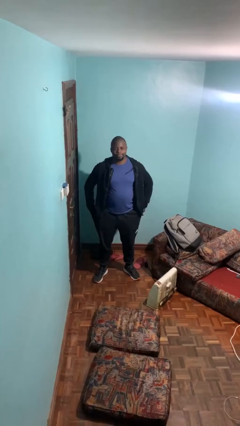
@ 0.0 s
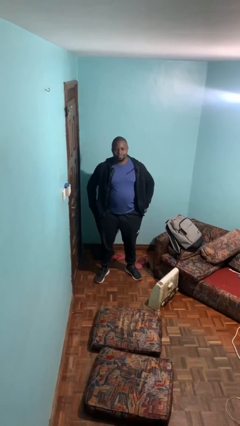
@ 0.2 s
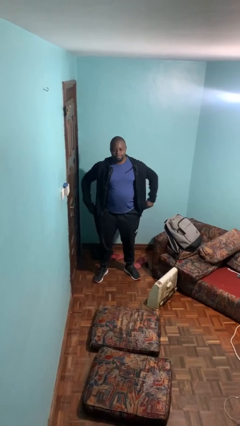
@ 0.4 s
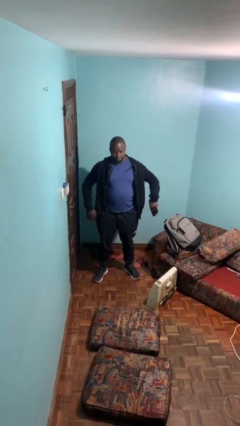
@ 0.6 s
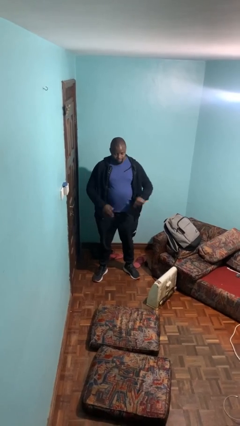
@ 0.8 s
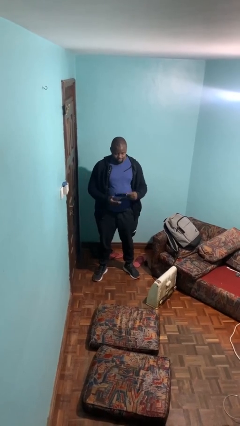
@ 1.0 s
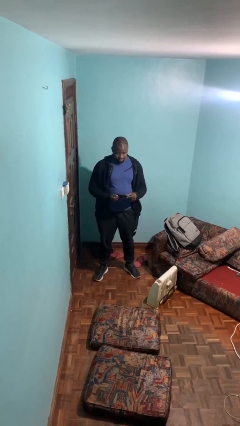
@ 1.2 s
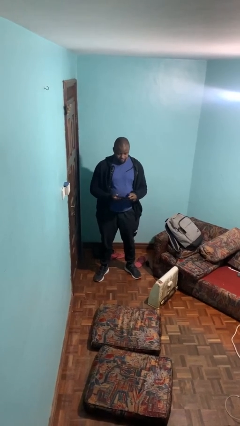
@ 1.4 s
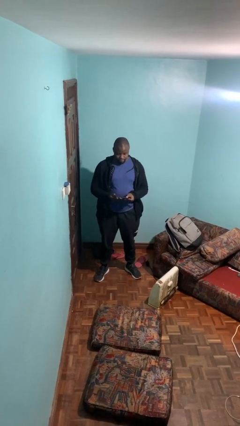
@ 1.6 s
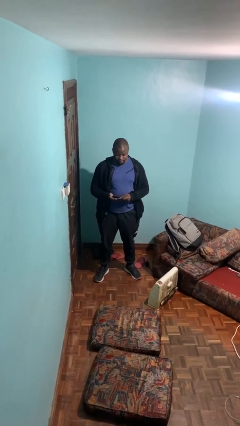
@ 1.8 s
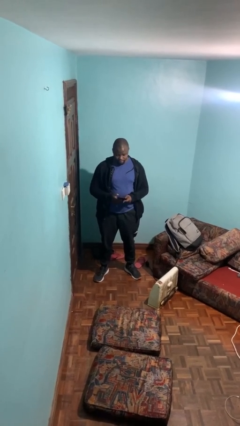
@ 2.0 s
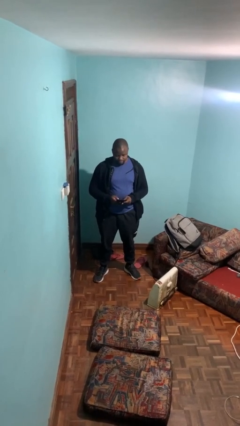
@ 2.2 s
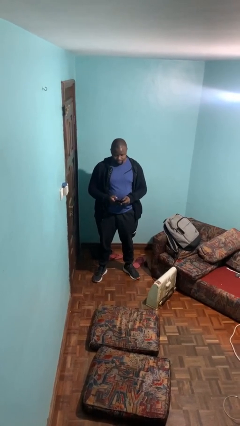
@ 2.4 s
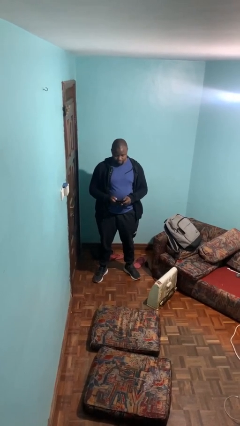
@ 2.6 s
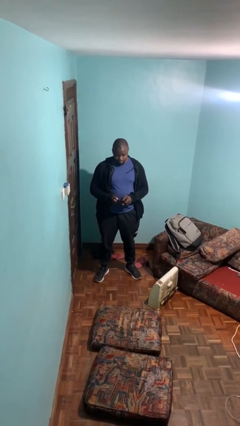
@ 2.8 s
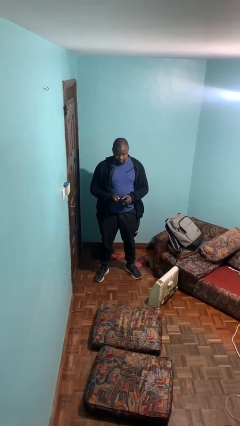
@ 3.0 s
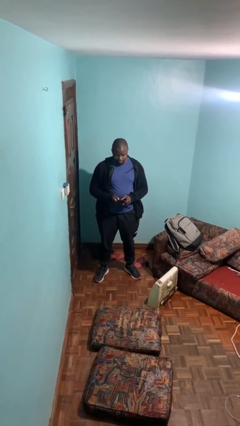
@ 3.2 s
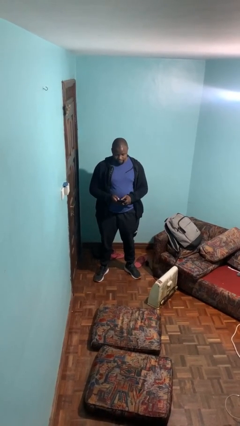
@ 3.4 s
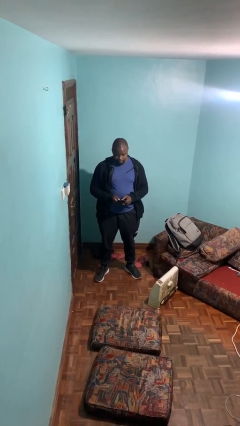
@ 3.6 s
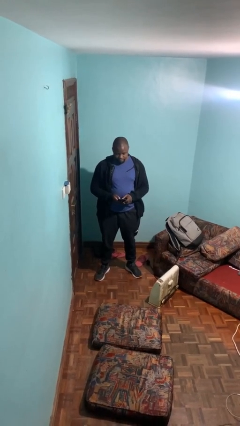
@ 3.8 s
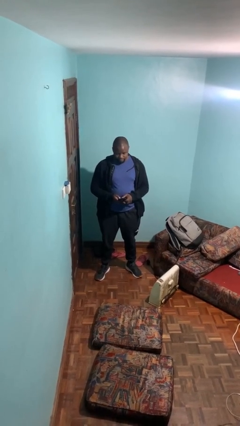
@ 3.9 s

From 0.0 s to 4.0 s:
person takes phone from pocket

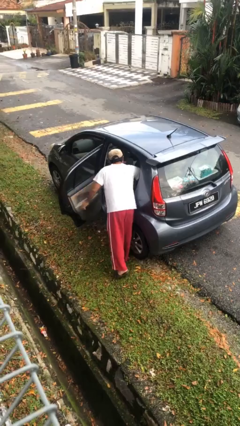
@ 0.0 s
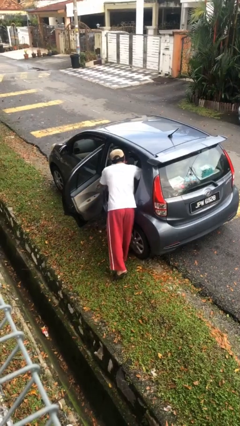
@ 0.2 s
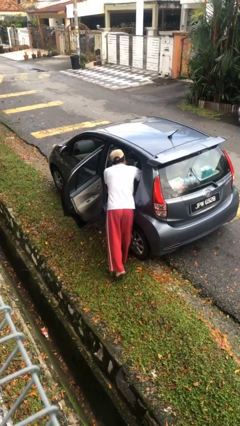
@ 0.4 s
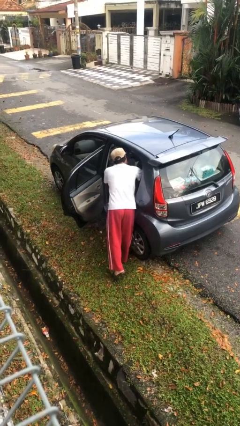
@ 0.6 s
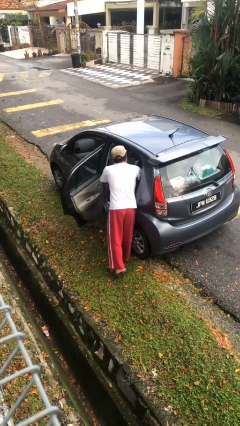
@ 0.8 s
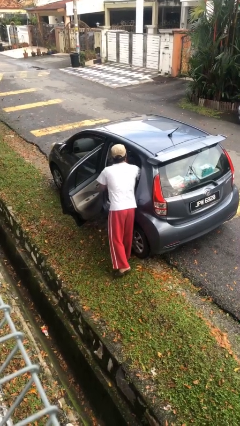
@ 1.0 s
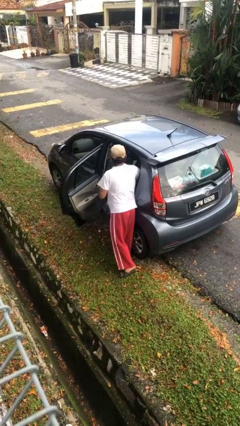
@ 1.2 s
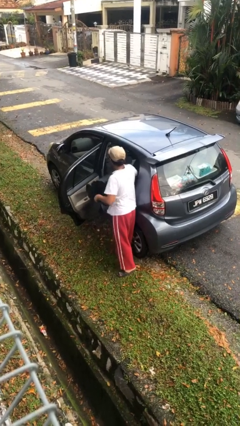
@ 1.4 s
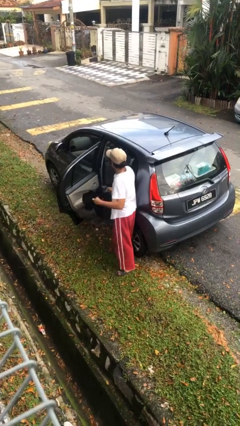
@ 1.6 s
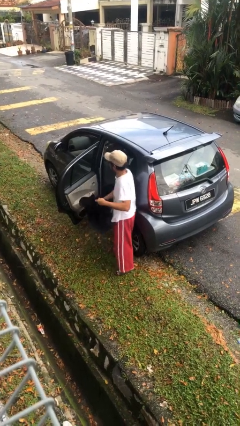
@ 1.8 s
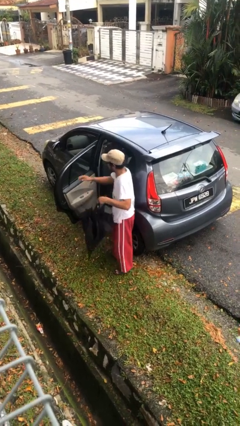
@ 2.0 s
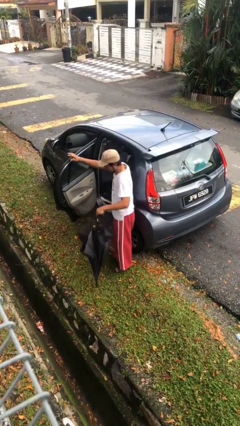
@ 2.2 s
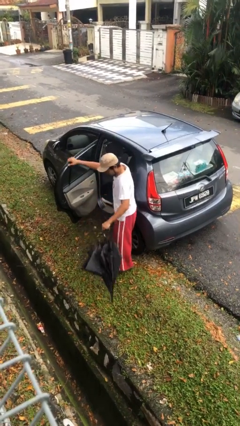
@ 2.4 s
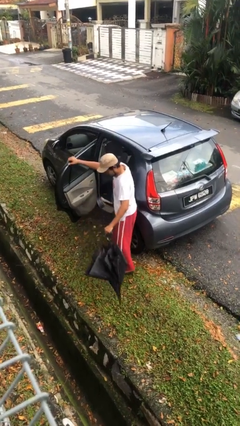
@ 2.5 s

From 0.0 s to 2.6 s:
person unloads car

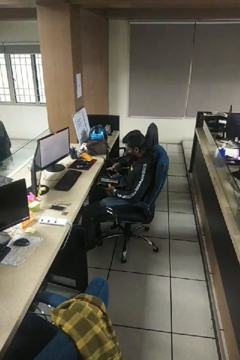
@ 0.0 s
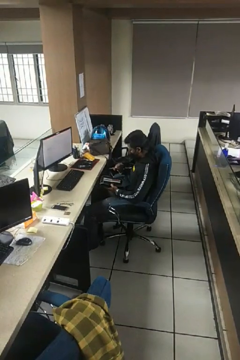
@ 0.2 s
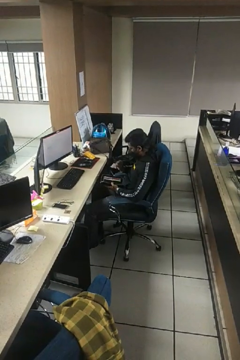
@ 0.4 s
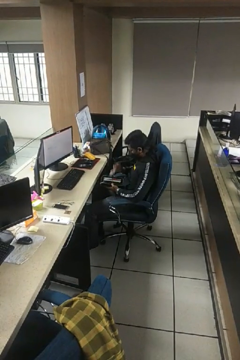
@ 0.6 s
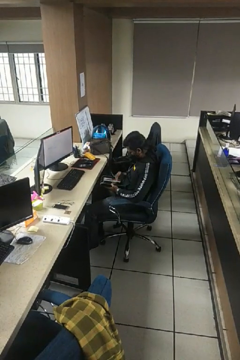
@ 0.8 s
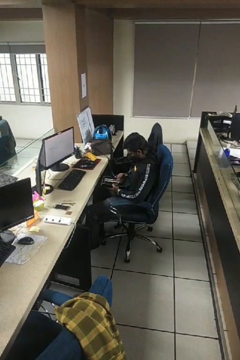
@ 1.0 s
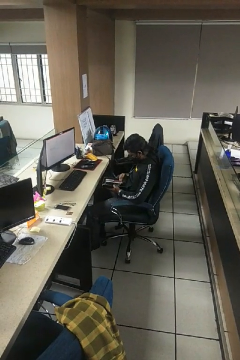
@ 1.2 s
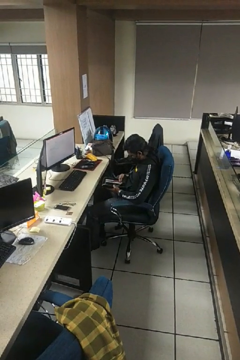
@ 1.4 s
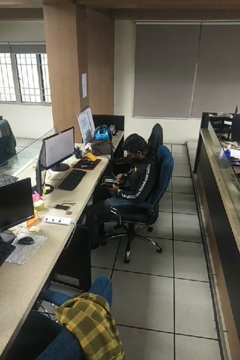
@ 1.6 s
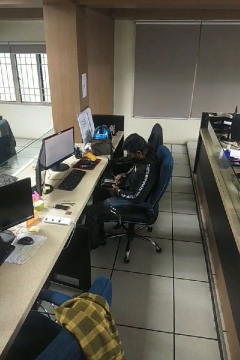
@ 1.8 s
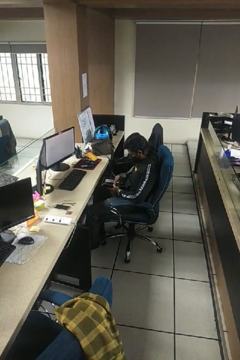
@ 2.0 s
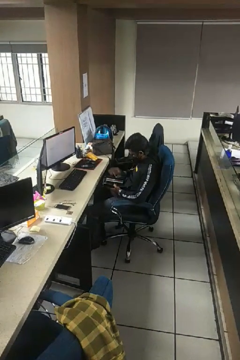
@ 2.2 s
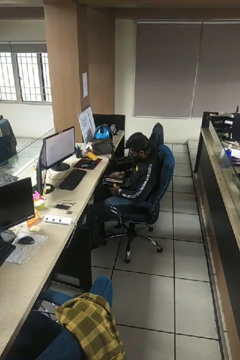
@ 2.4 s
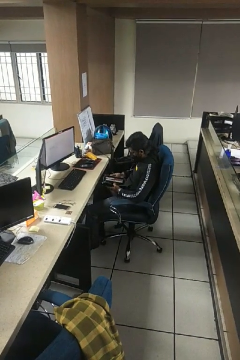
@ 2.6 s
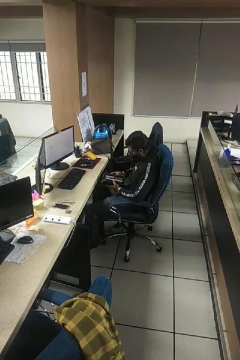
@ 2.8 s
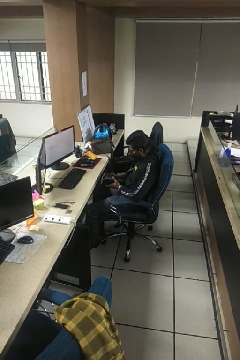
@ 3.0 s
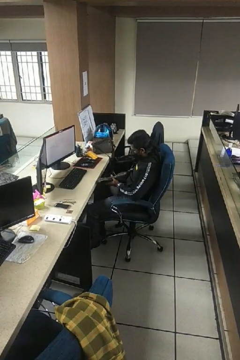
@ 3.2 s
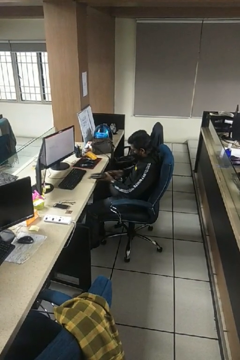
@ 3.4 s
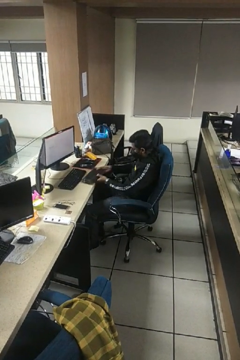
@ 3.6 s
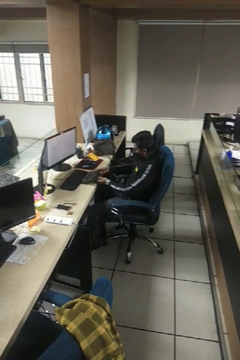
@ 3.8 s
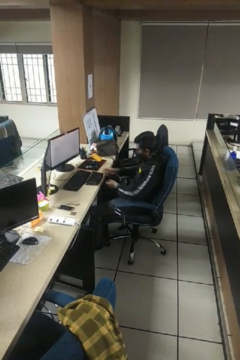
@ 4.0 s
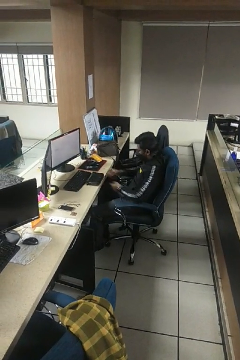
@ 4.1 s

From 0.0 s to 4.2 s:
person puts object into purse

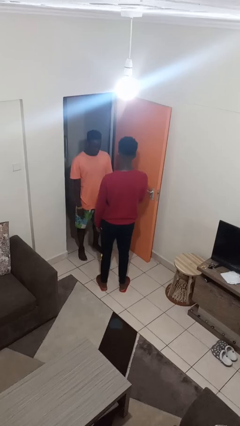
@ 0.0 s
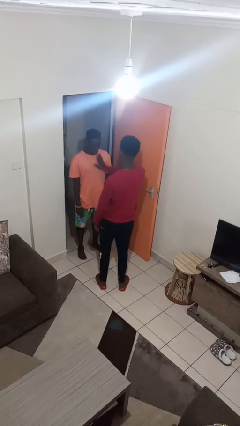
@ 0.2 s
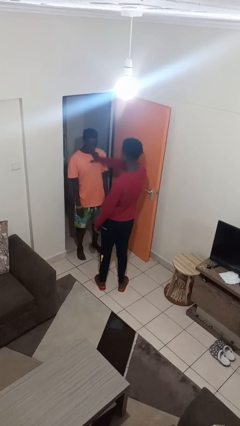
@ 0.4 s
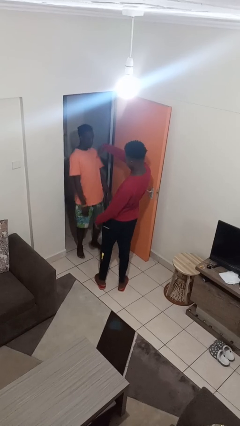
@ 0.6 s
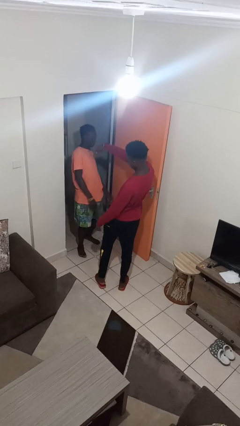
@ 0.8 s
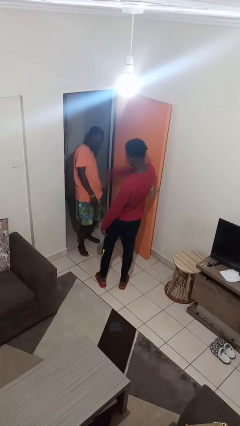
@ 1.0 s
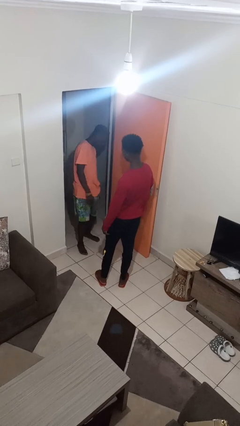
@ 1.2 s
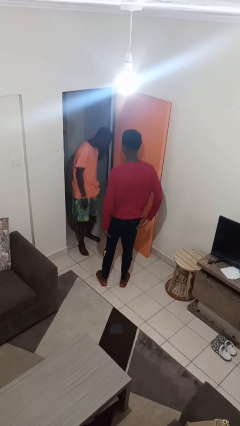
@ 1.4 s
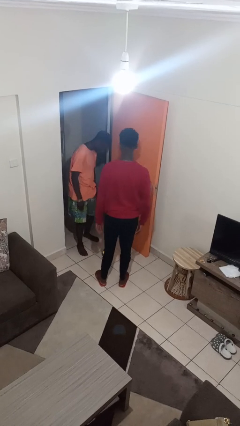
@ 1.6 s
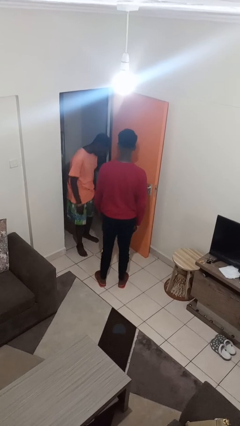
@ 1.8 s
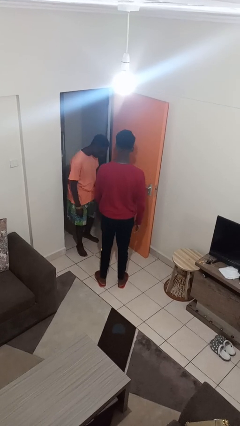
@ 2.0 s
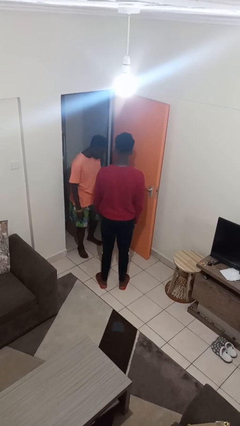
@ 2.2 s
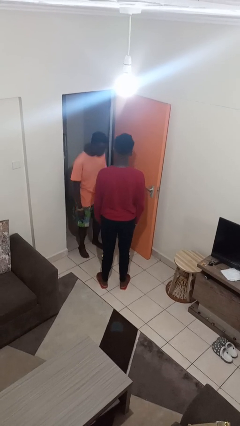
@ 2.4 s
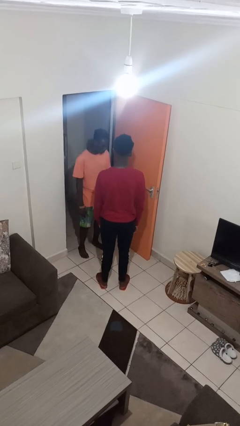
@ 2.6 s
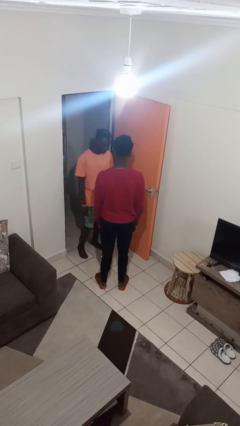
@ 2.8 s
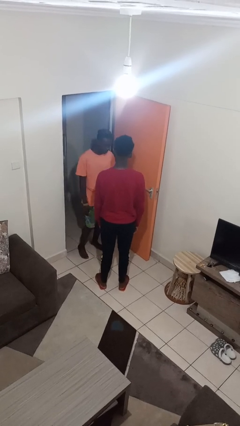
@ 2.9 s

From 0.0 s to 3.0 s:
person shoves person

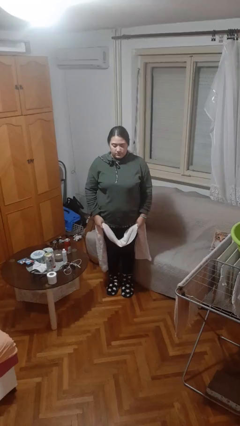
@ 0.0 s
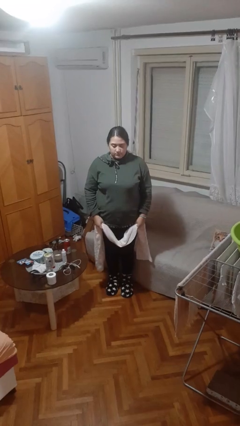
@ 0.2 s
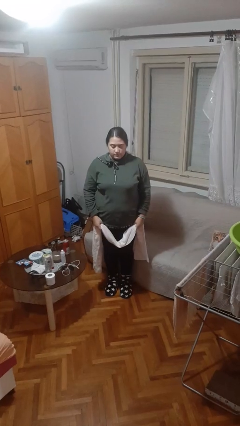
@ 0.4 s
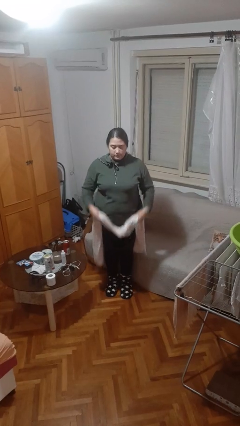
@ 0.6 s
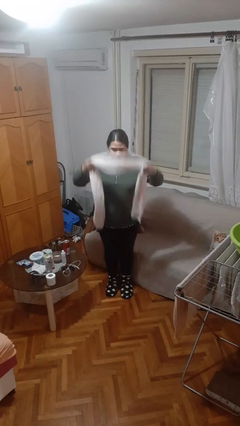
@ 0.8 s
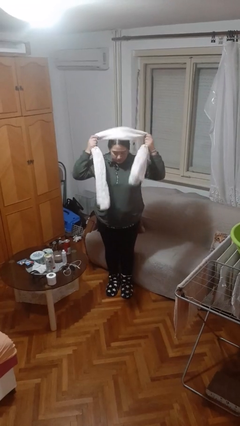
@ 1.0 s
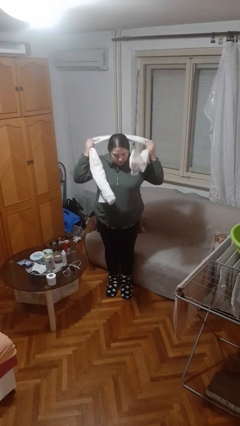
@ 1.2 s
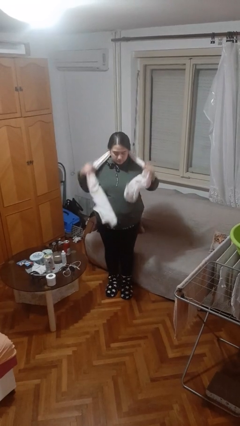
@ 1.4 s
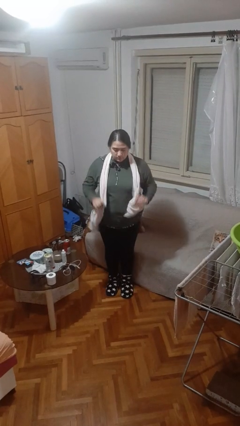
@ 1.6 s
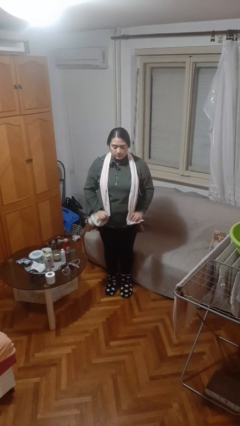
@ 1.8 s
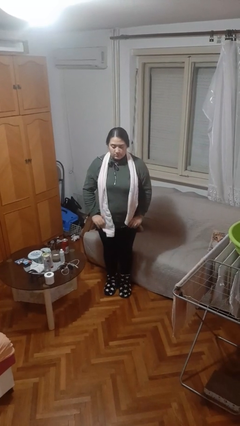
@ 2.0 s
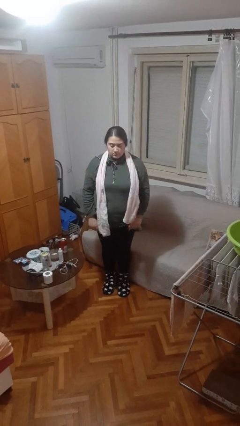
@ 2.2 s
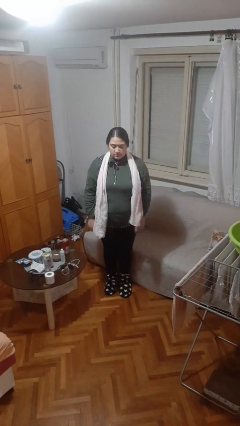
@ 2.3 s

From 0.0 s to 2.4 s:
person puts on scarf

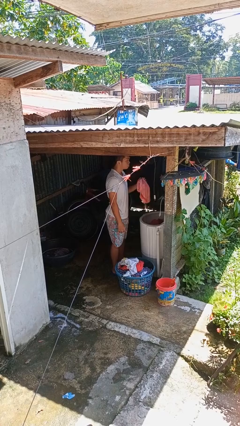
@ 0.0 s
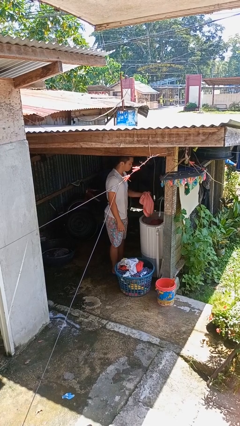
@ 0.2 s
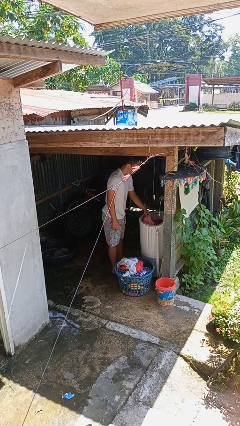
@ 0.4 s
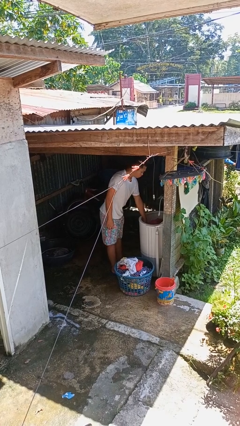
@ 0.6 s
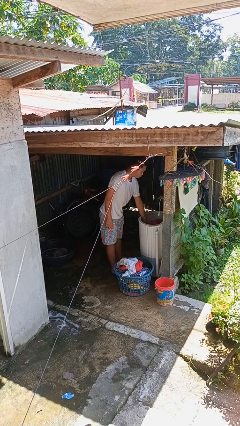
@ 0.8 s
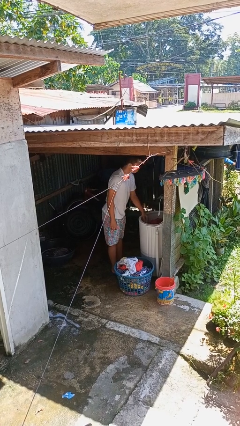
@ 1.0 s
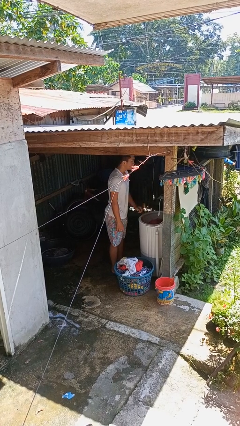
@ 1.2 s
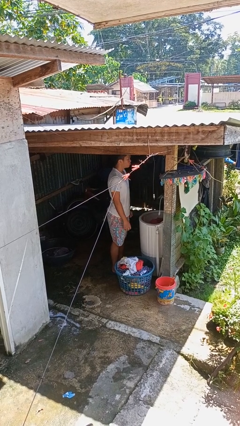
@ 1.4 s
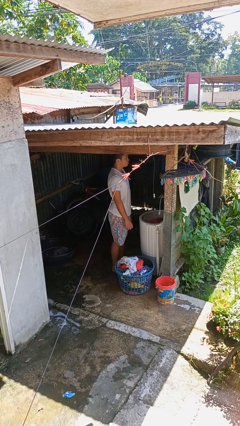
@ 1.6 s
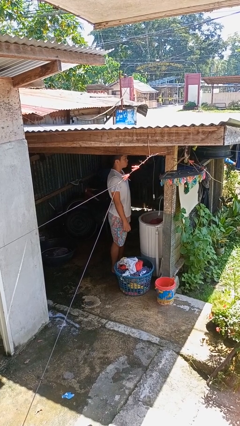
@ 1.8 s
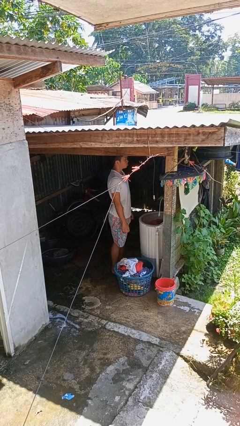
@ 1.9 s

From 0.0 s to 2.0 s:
person loads clotheswasher
